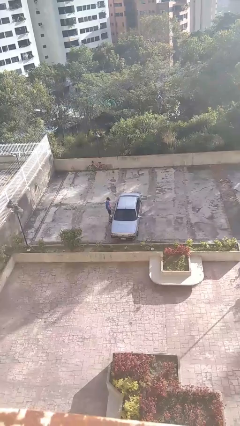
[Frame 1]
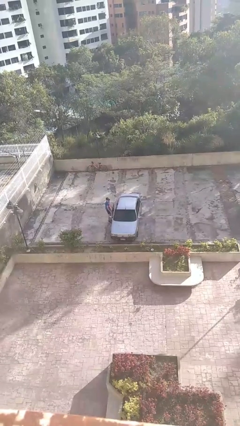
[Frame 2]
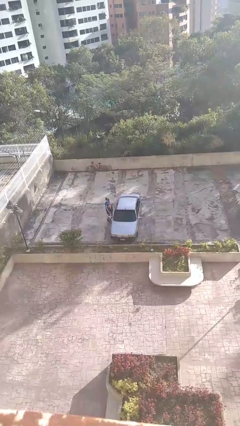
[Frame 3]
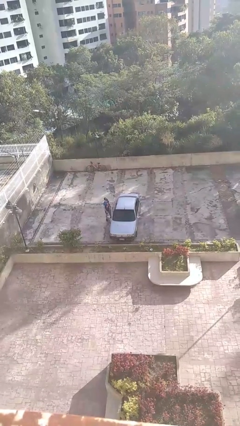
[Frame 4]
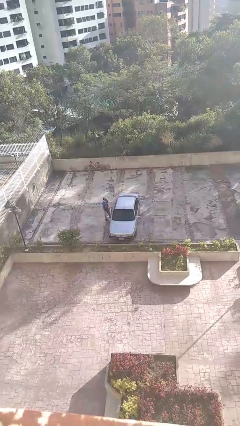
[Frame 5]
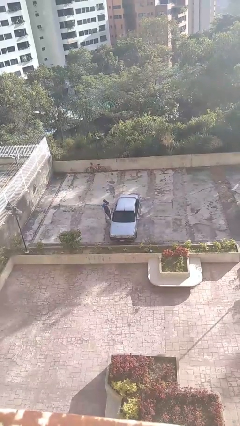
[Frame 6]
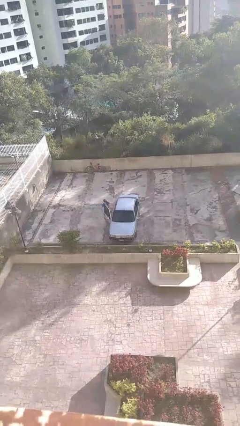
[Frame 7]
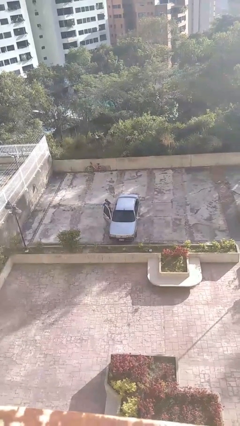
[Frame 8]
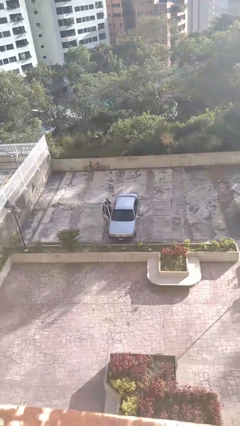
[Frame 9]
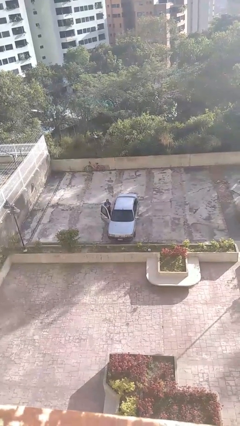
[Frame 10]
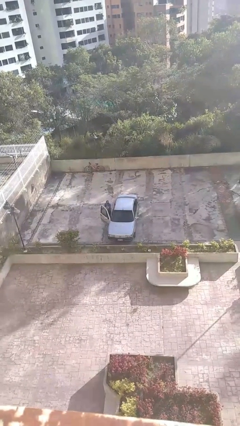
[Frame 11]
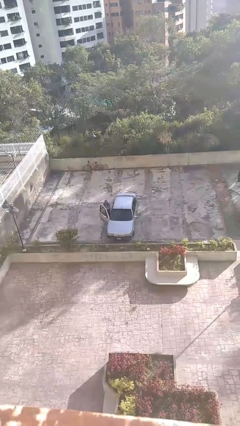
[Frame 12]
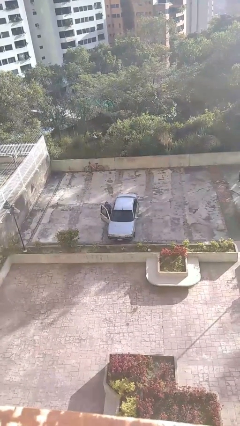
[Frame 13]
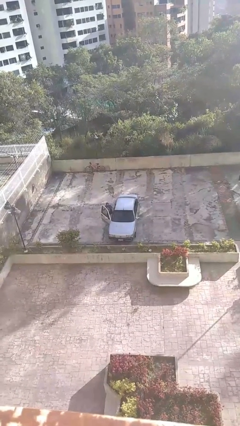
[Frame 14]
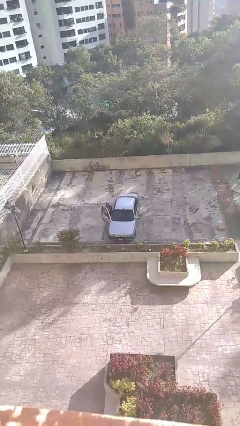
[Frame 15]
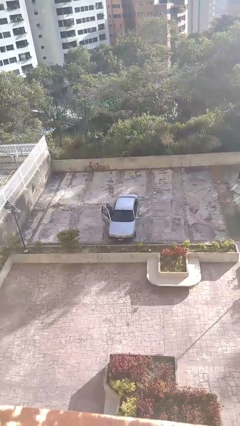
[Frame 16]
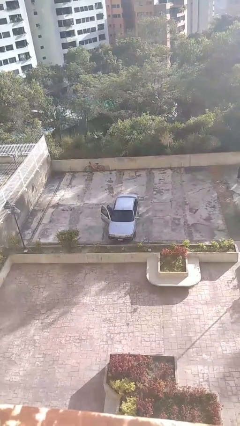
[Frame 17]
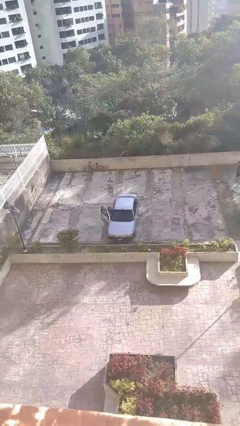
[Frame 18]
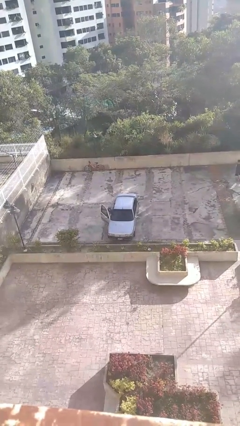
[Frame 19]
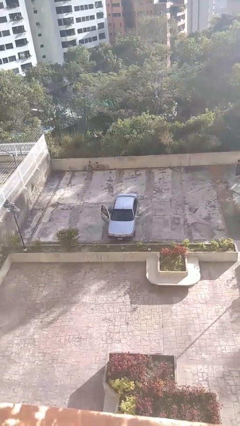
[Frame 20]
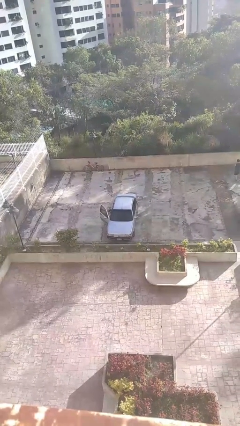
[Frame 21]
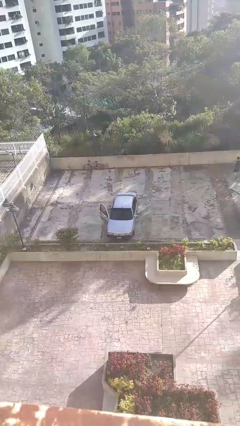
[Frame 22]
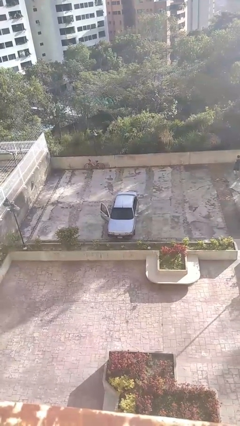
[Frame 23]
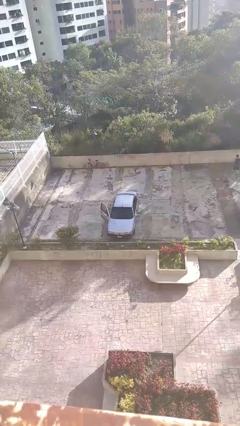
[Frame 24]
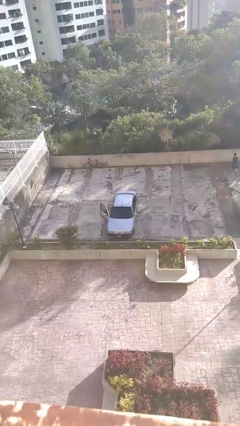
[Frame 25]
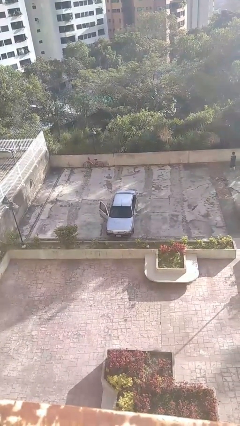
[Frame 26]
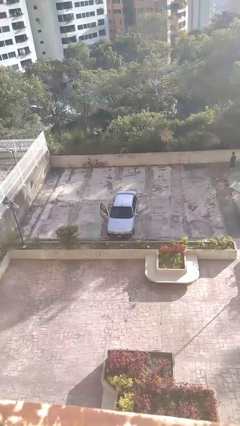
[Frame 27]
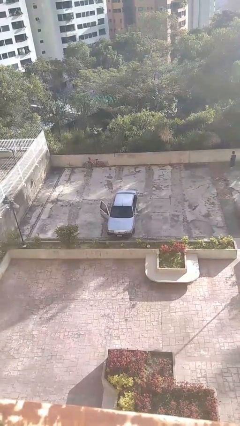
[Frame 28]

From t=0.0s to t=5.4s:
car picks up person

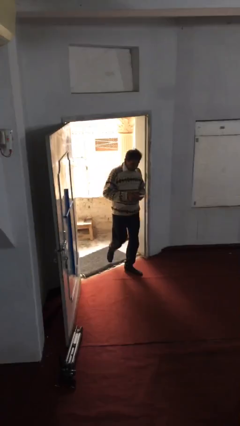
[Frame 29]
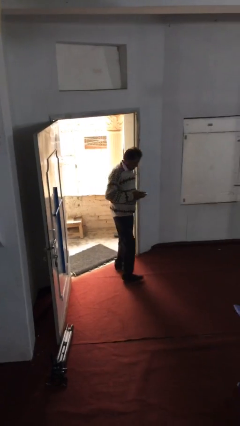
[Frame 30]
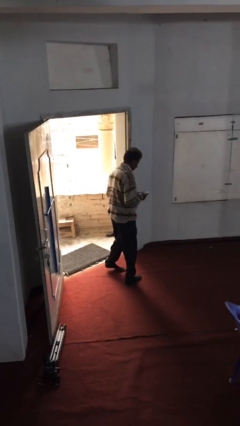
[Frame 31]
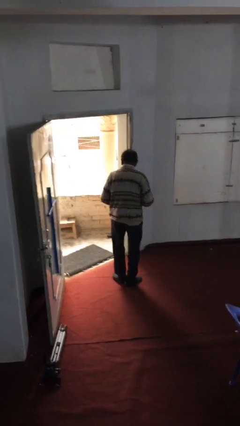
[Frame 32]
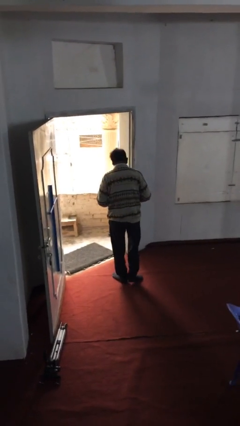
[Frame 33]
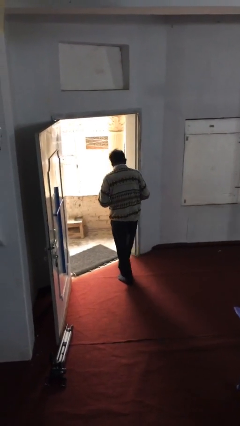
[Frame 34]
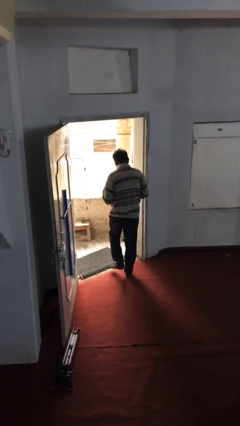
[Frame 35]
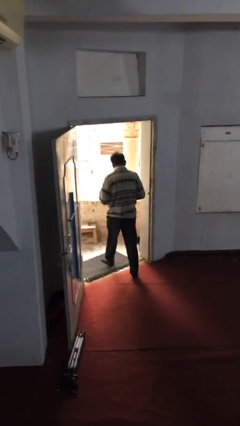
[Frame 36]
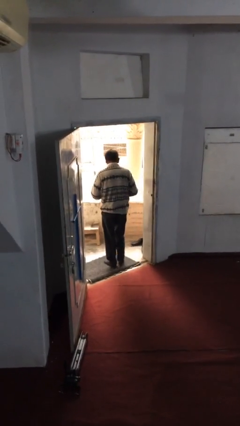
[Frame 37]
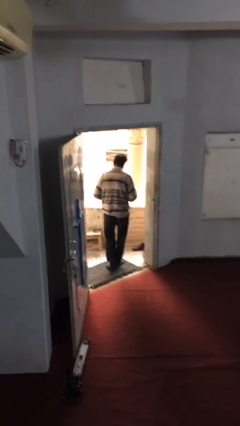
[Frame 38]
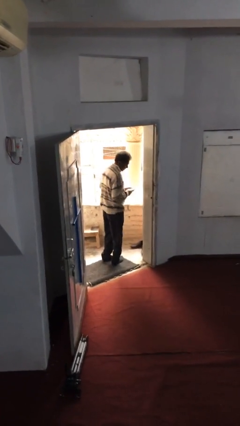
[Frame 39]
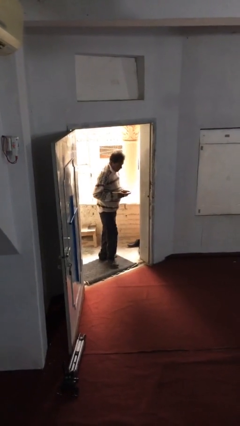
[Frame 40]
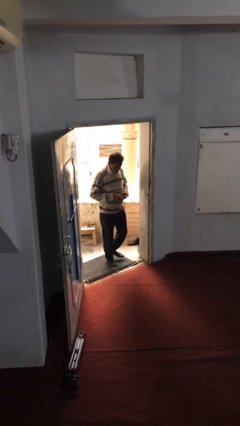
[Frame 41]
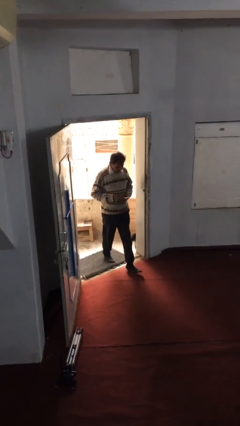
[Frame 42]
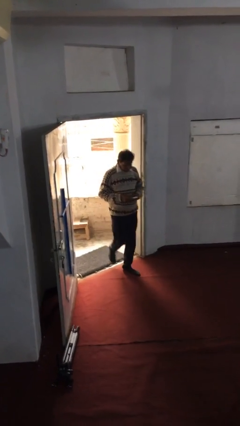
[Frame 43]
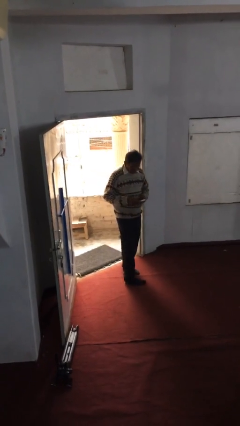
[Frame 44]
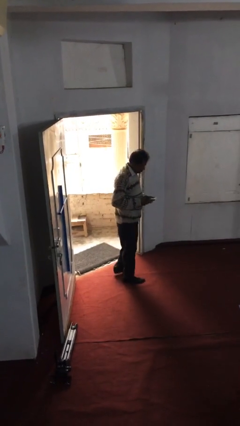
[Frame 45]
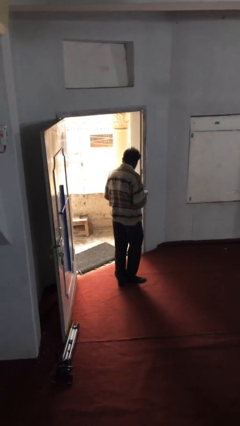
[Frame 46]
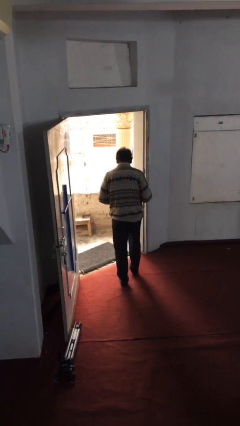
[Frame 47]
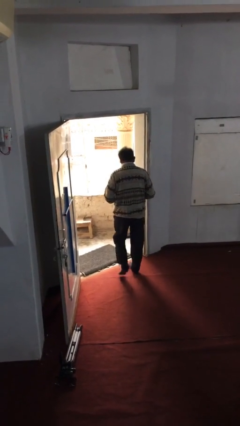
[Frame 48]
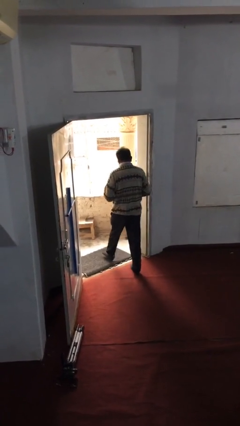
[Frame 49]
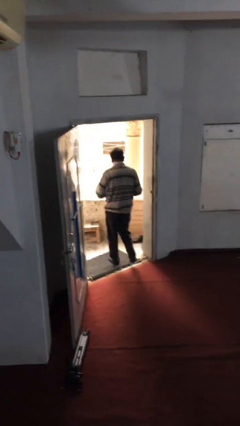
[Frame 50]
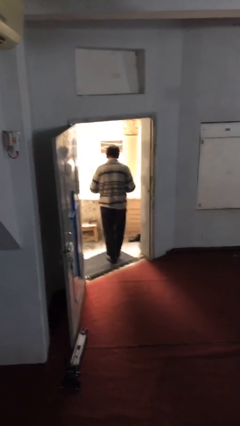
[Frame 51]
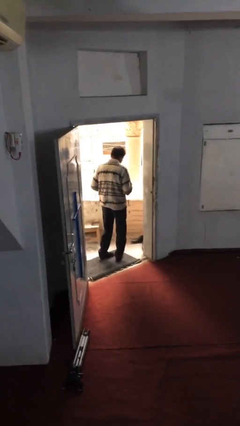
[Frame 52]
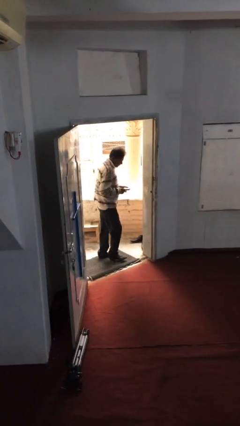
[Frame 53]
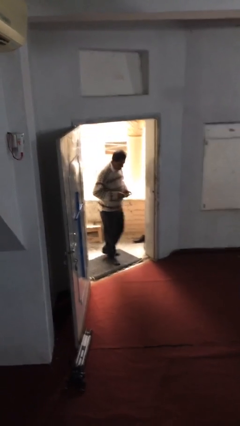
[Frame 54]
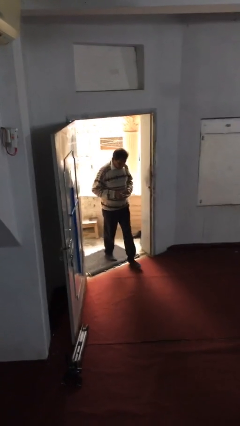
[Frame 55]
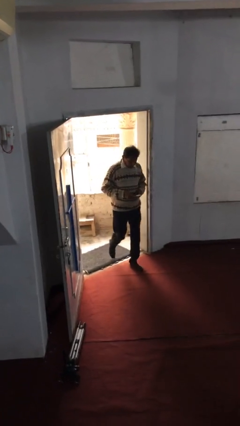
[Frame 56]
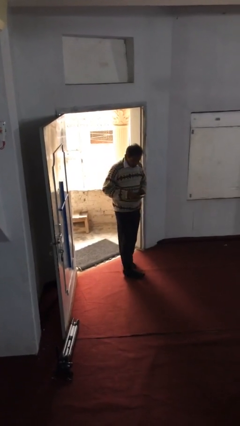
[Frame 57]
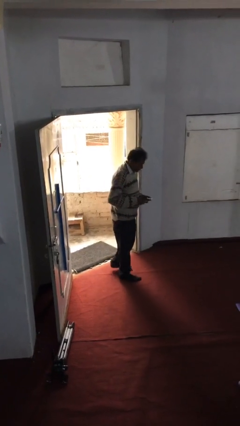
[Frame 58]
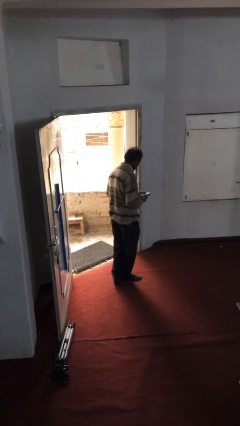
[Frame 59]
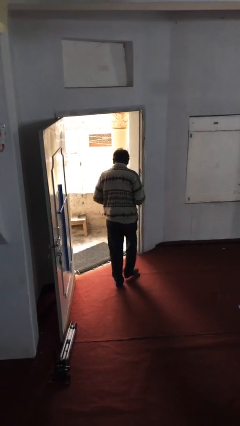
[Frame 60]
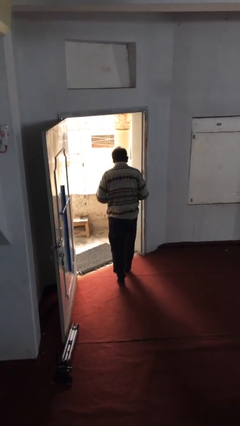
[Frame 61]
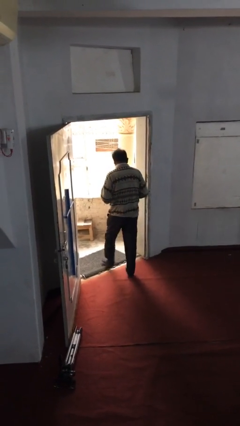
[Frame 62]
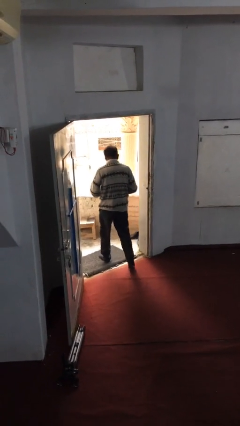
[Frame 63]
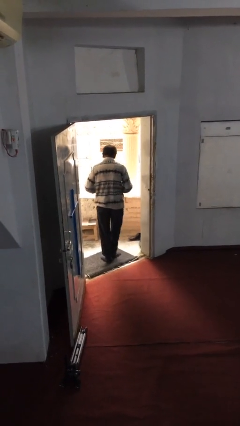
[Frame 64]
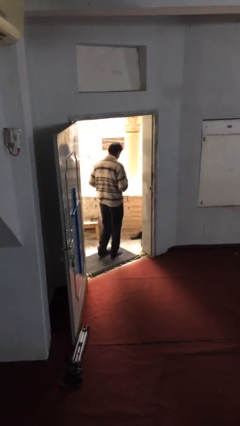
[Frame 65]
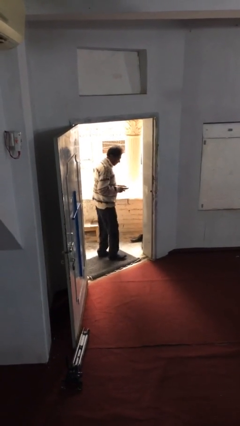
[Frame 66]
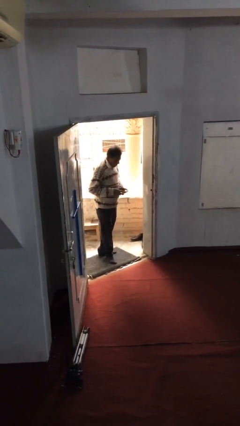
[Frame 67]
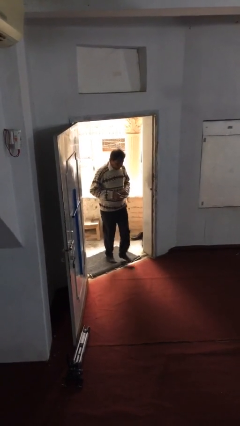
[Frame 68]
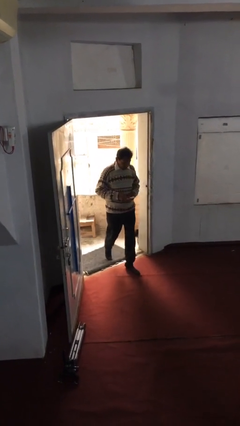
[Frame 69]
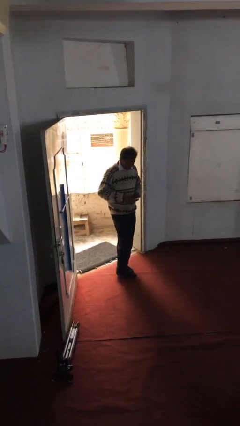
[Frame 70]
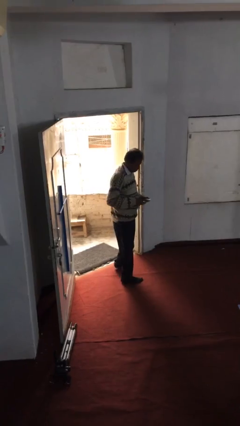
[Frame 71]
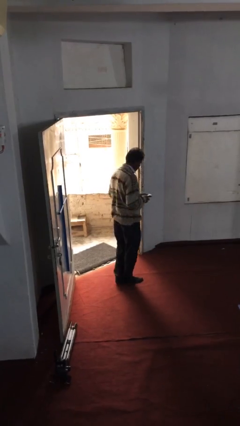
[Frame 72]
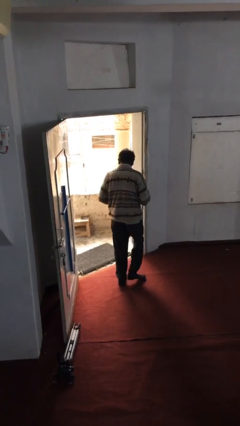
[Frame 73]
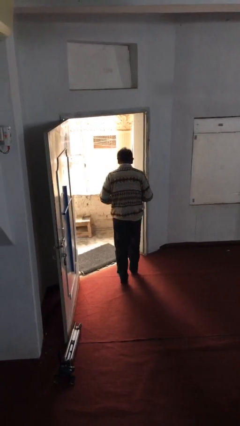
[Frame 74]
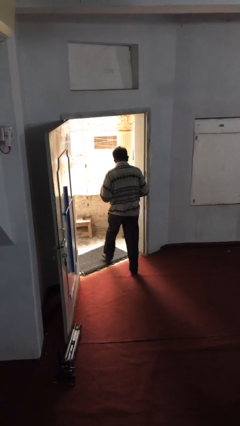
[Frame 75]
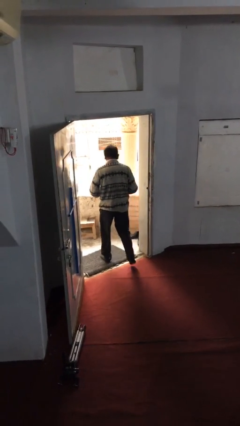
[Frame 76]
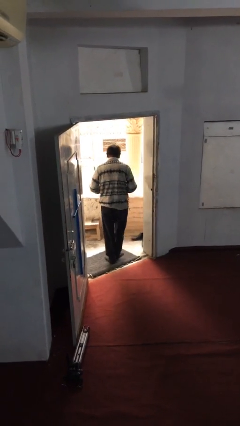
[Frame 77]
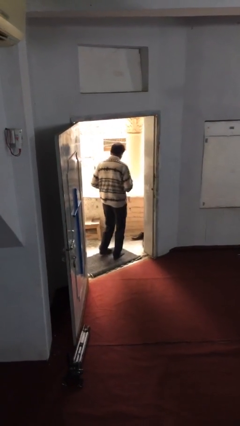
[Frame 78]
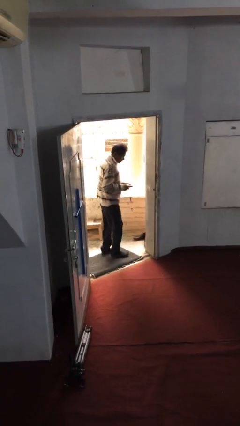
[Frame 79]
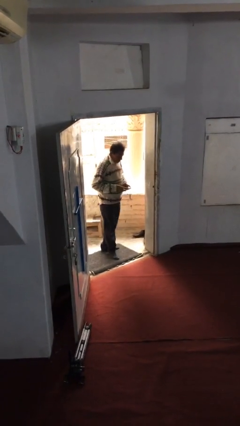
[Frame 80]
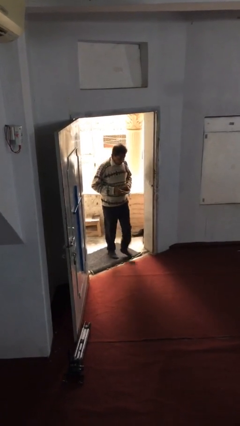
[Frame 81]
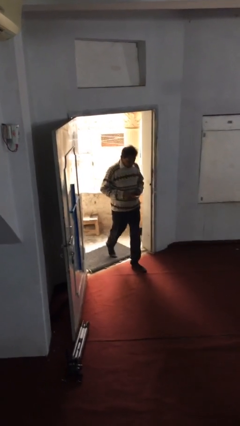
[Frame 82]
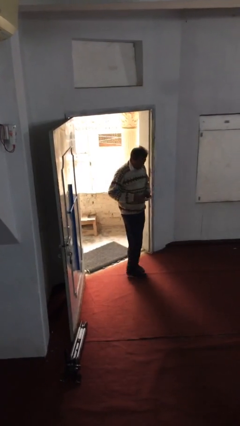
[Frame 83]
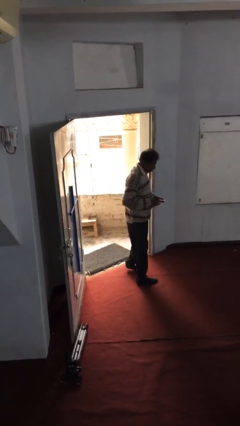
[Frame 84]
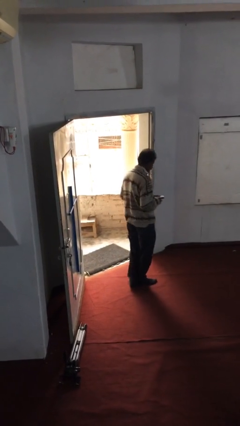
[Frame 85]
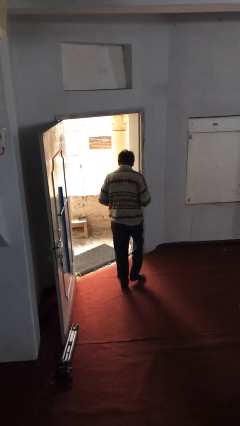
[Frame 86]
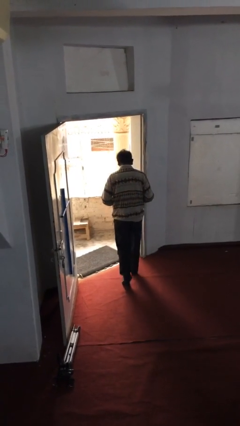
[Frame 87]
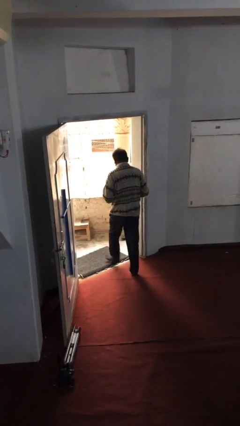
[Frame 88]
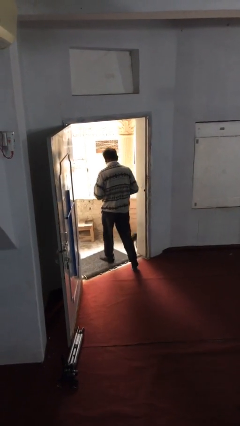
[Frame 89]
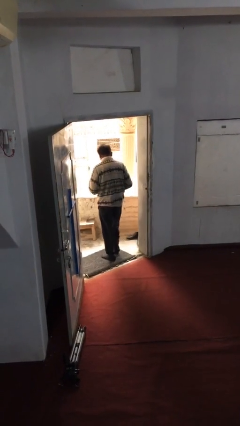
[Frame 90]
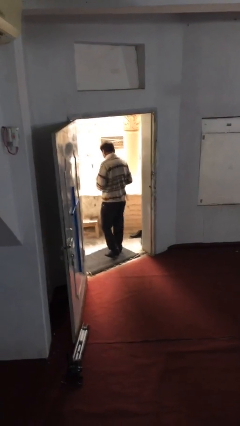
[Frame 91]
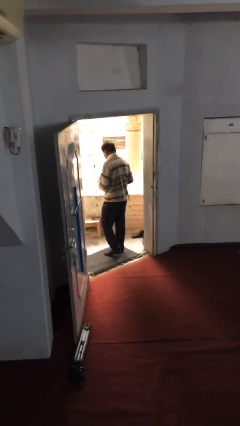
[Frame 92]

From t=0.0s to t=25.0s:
person texts on phone
